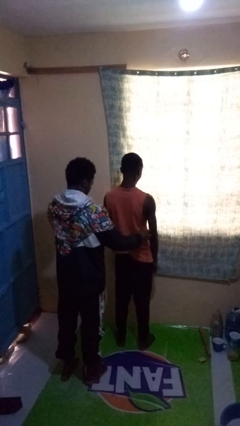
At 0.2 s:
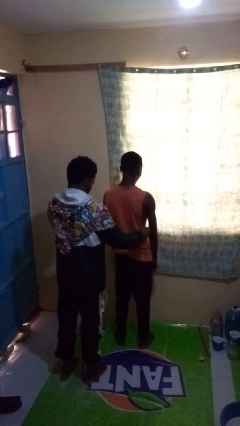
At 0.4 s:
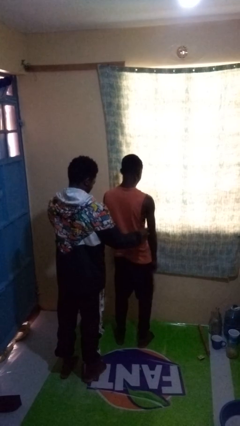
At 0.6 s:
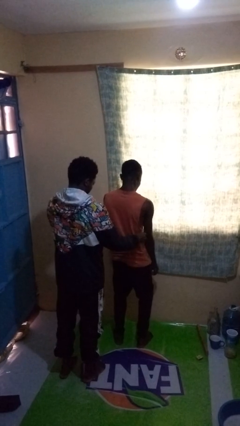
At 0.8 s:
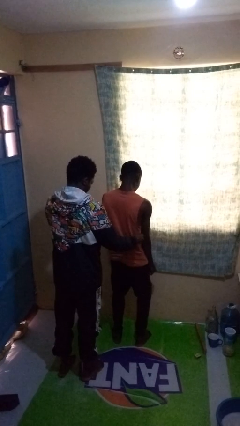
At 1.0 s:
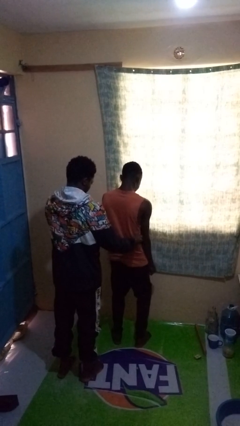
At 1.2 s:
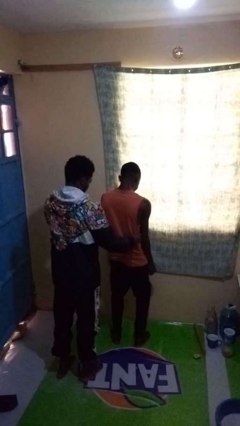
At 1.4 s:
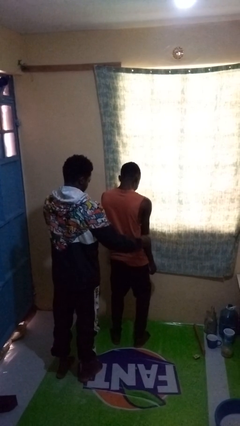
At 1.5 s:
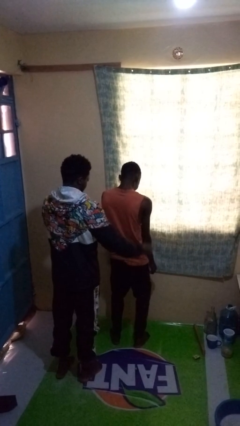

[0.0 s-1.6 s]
person tickles person

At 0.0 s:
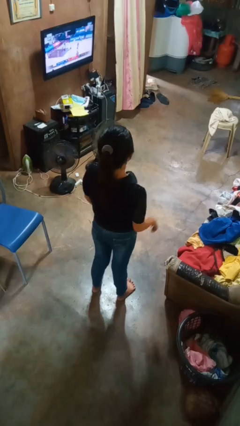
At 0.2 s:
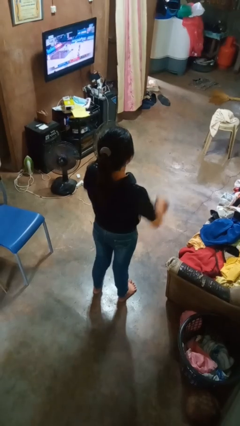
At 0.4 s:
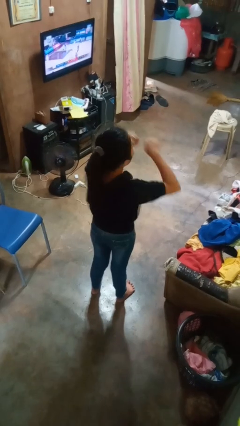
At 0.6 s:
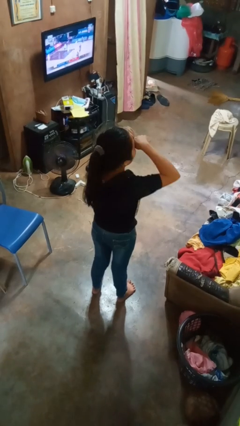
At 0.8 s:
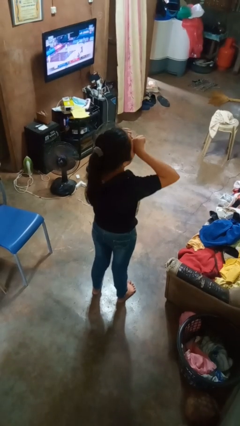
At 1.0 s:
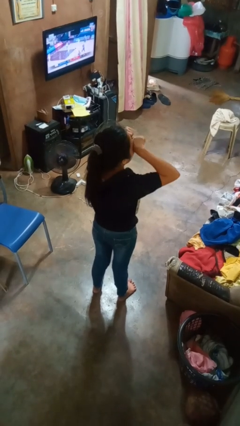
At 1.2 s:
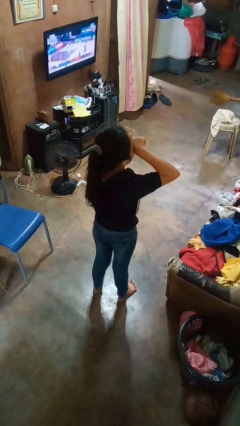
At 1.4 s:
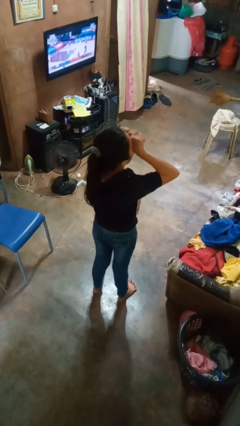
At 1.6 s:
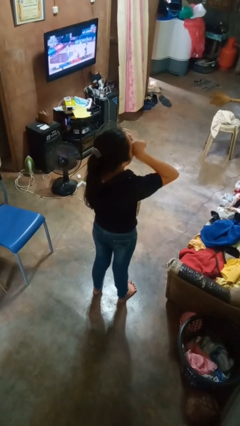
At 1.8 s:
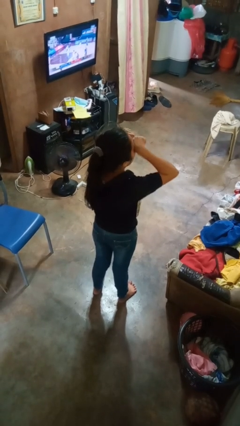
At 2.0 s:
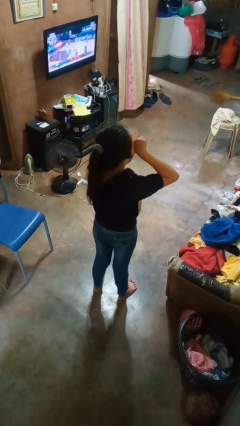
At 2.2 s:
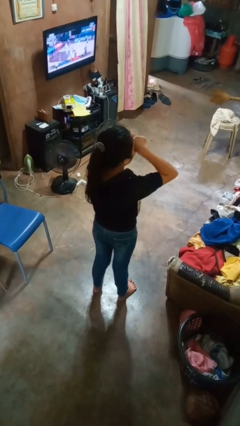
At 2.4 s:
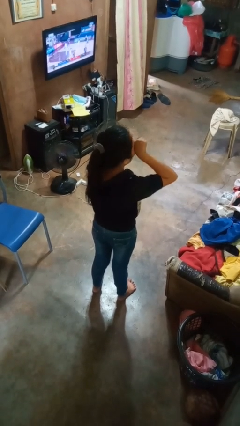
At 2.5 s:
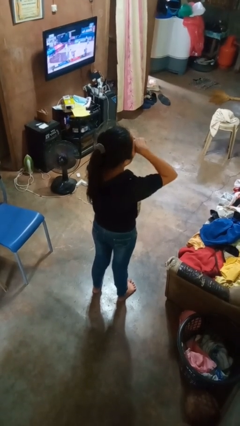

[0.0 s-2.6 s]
person rubs eyes

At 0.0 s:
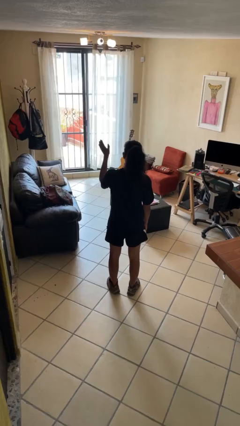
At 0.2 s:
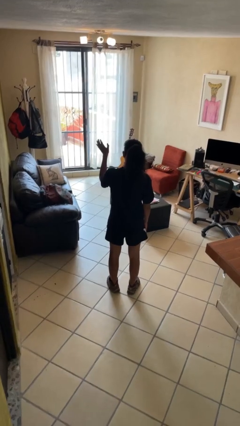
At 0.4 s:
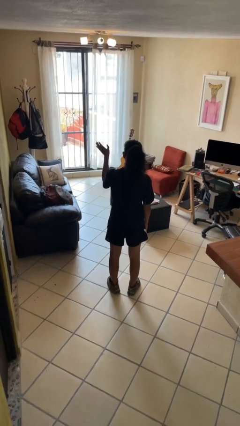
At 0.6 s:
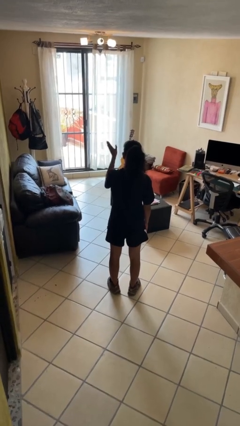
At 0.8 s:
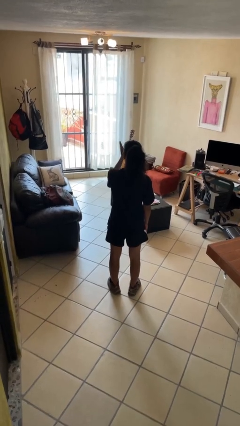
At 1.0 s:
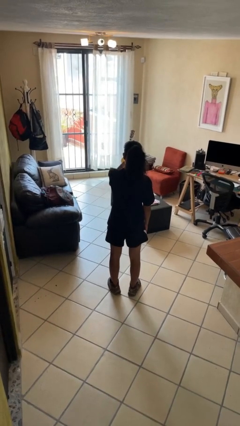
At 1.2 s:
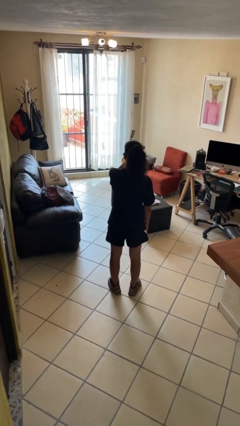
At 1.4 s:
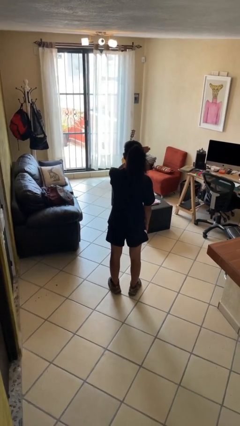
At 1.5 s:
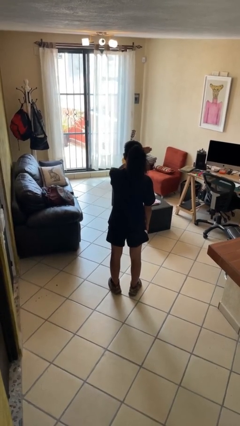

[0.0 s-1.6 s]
person gestures swipe right

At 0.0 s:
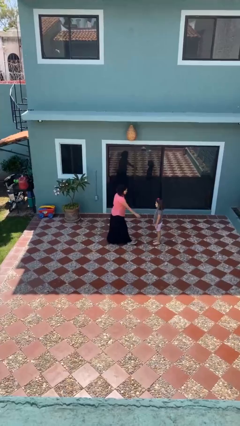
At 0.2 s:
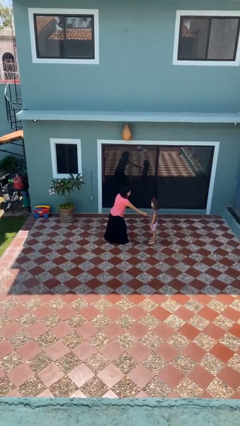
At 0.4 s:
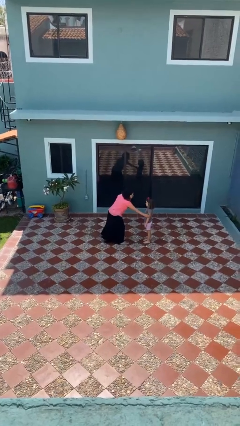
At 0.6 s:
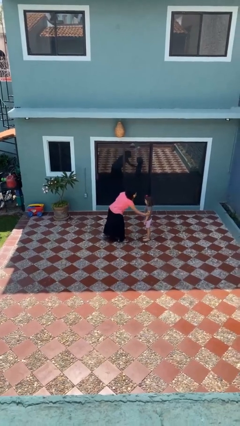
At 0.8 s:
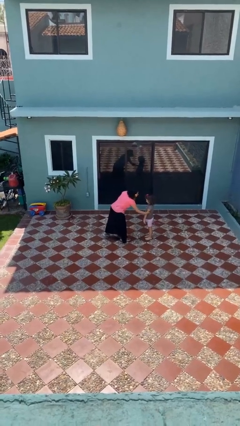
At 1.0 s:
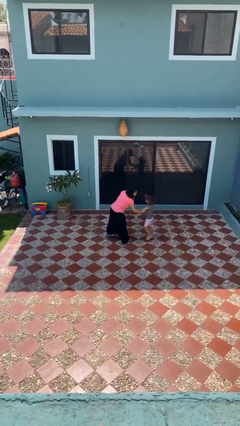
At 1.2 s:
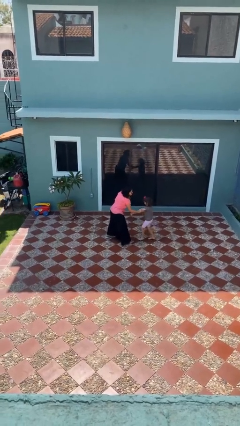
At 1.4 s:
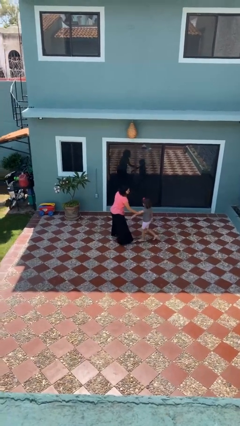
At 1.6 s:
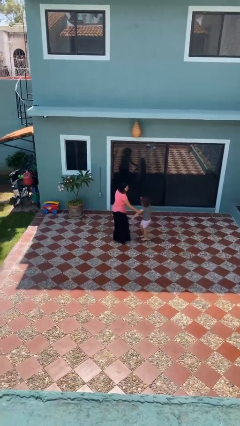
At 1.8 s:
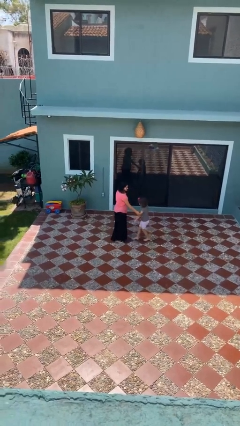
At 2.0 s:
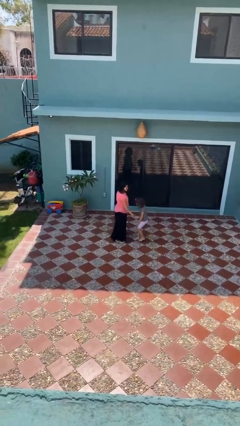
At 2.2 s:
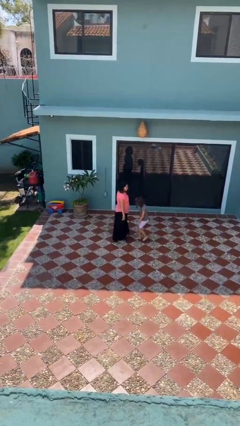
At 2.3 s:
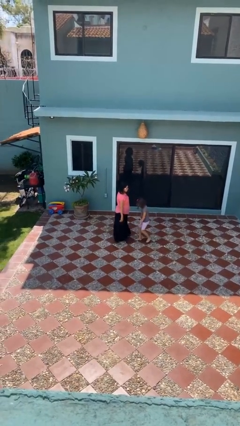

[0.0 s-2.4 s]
person grabs person by bicep

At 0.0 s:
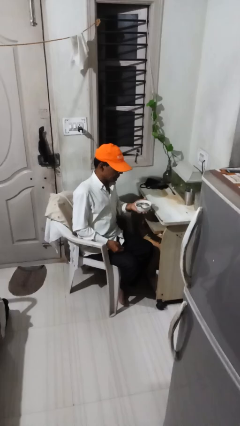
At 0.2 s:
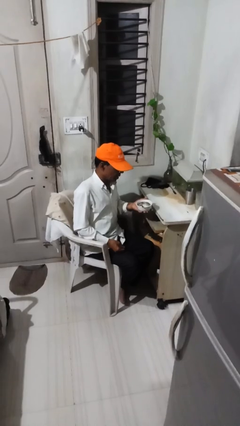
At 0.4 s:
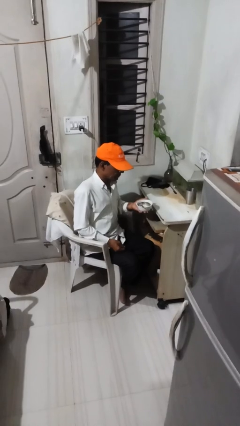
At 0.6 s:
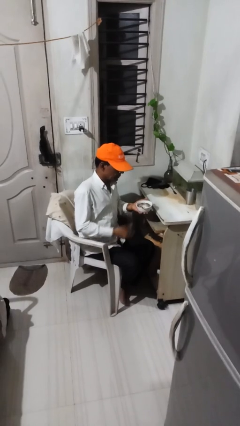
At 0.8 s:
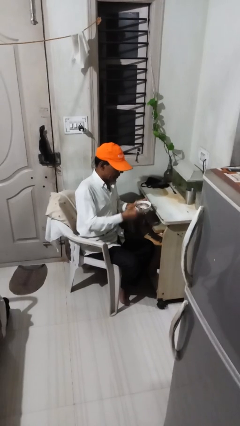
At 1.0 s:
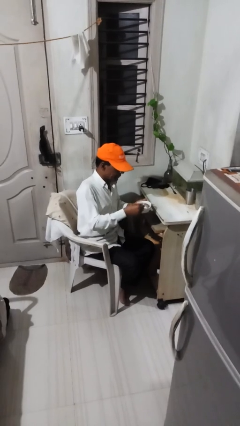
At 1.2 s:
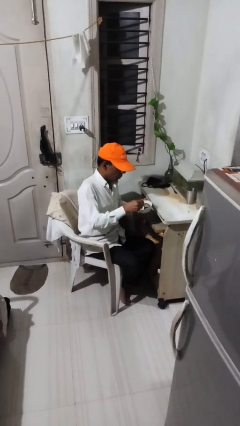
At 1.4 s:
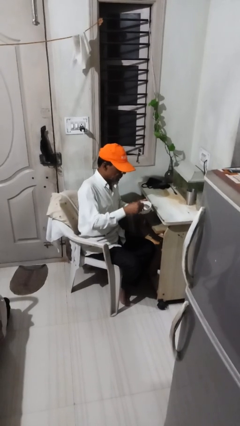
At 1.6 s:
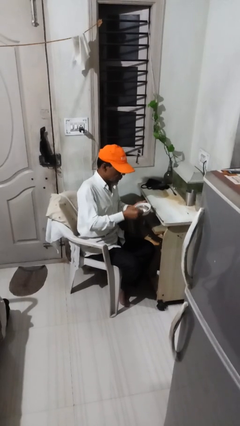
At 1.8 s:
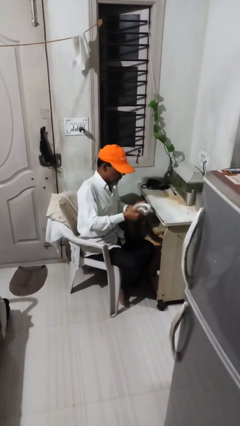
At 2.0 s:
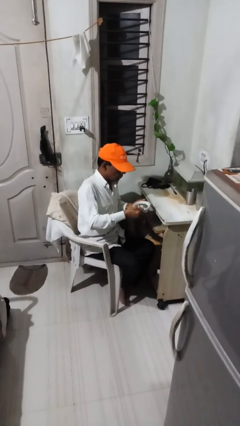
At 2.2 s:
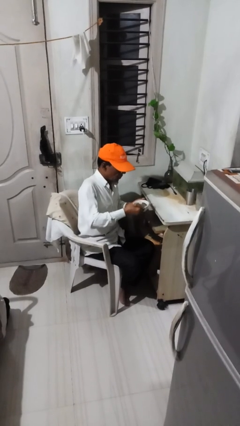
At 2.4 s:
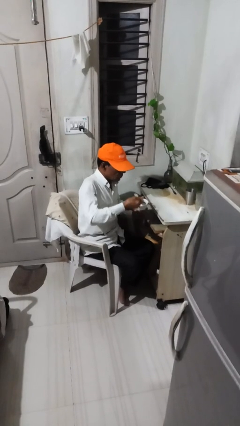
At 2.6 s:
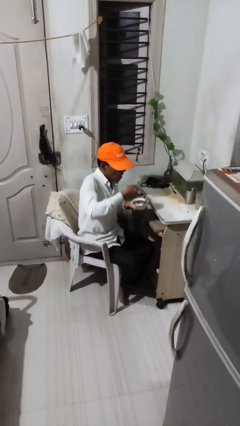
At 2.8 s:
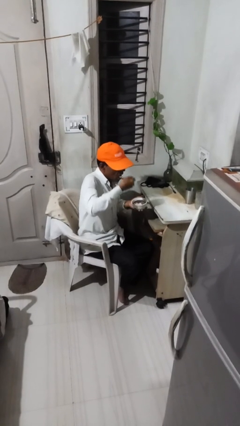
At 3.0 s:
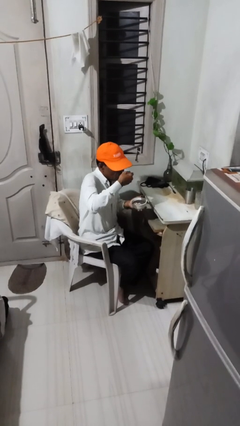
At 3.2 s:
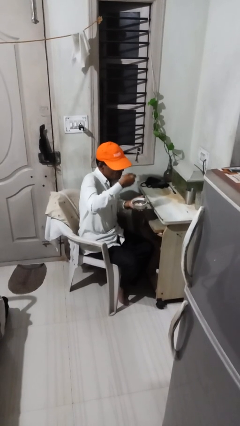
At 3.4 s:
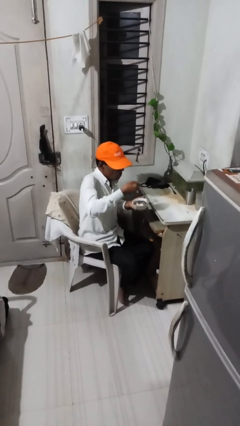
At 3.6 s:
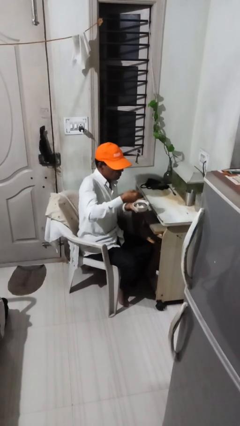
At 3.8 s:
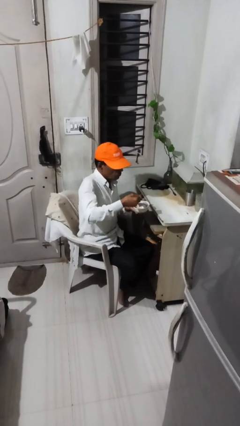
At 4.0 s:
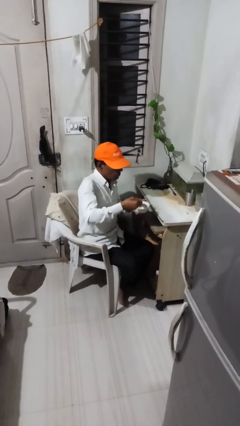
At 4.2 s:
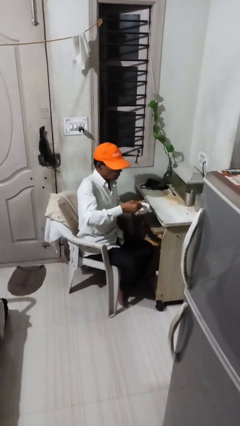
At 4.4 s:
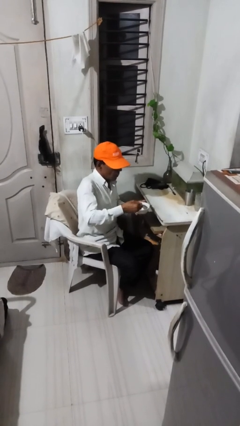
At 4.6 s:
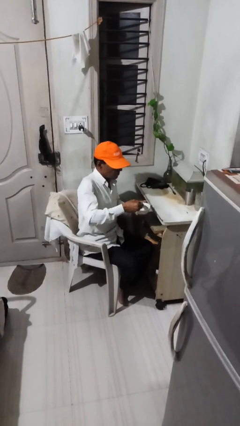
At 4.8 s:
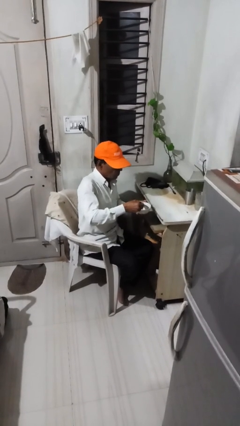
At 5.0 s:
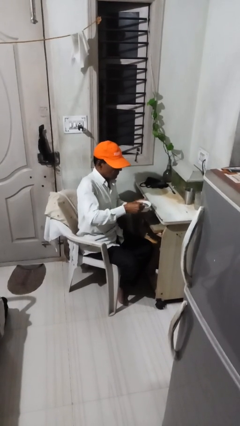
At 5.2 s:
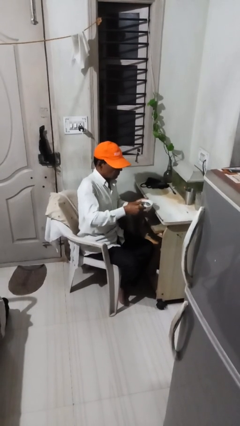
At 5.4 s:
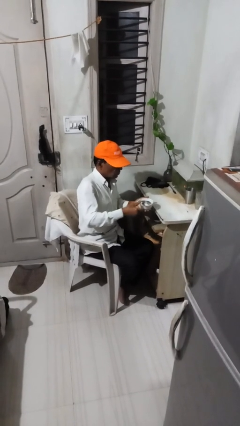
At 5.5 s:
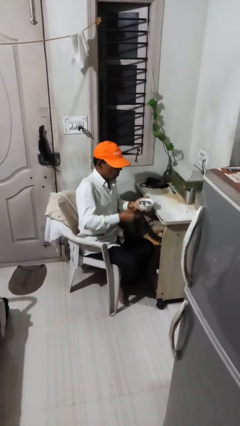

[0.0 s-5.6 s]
person eats with utensil

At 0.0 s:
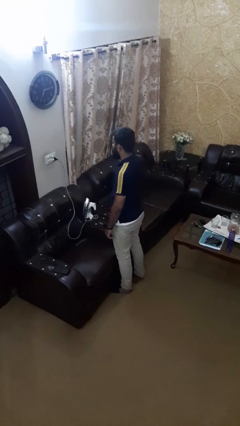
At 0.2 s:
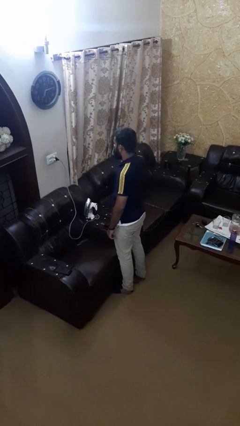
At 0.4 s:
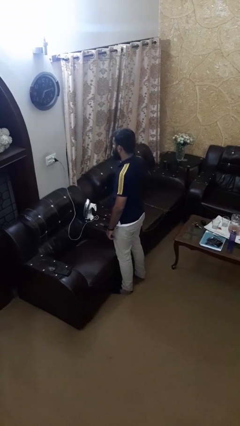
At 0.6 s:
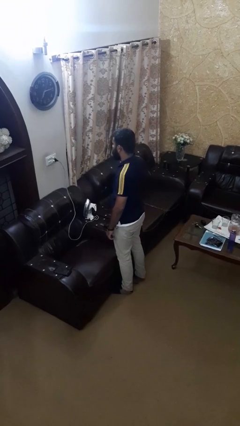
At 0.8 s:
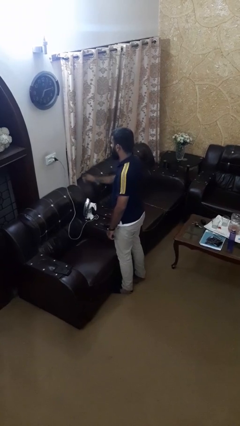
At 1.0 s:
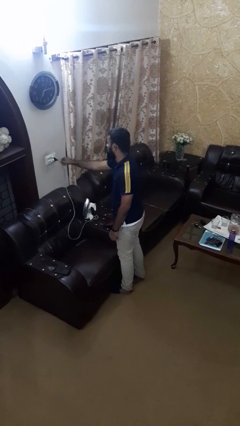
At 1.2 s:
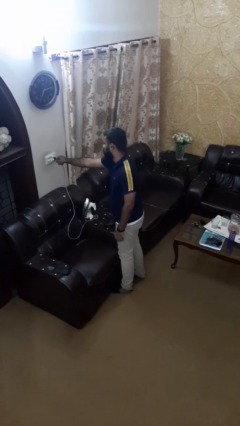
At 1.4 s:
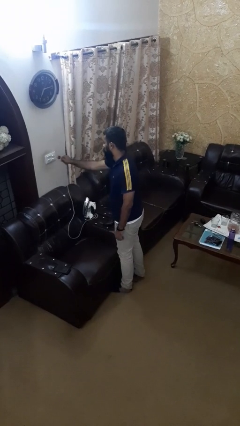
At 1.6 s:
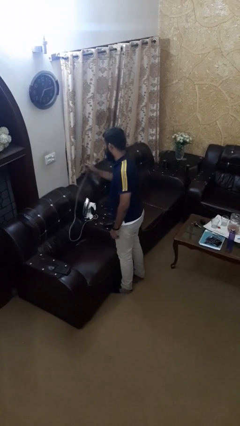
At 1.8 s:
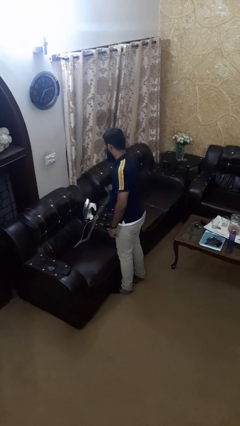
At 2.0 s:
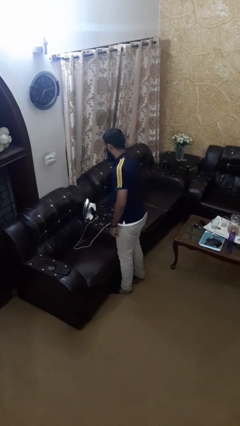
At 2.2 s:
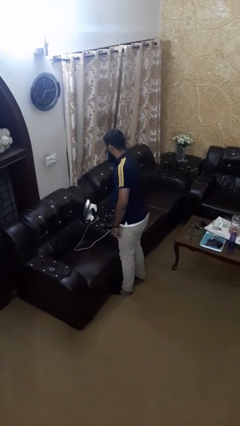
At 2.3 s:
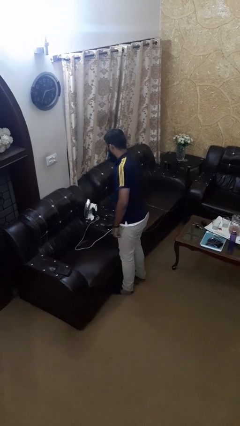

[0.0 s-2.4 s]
person unplugs from electrical socket

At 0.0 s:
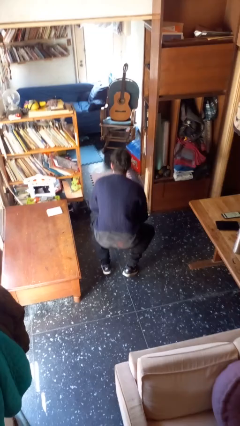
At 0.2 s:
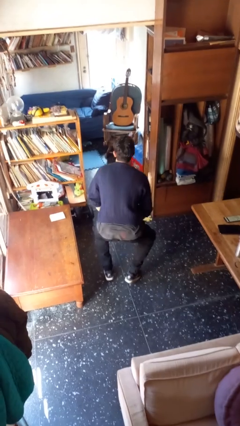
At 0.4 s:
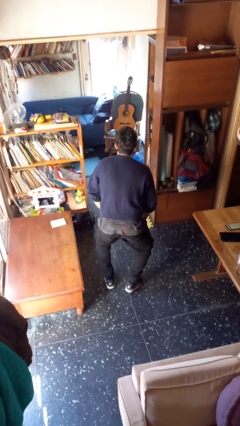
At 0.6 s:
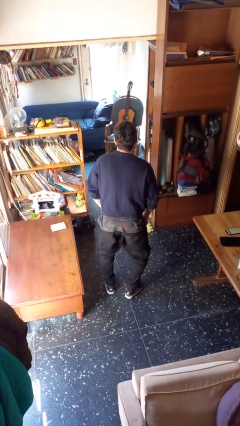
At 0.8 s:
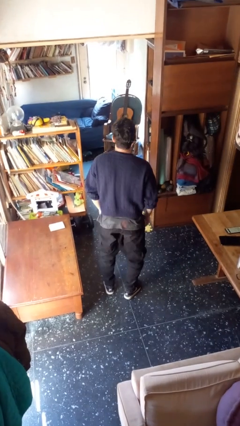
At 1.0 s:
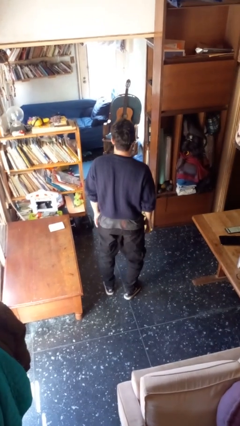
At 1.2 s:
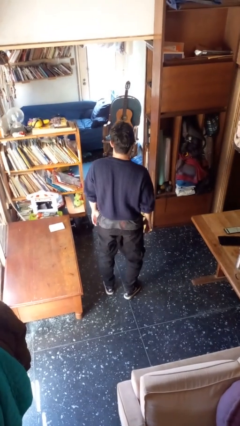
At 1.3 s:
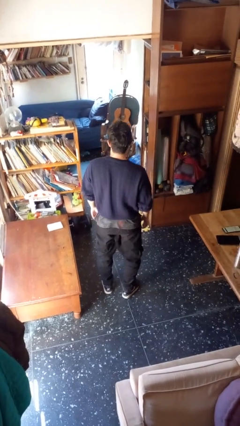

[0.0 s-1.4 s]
person stands up
